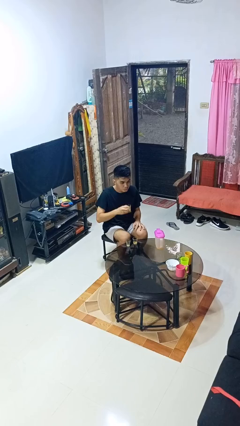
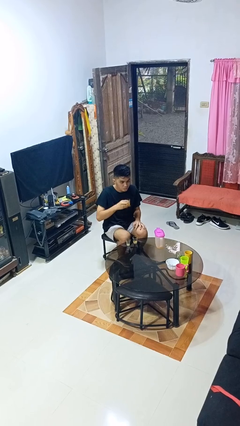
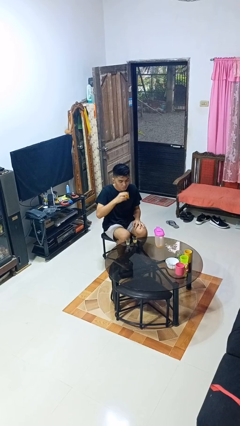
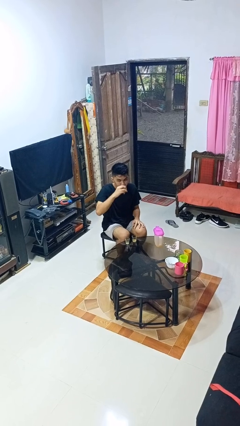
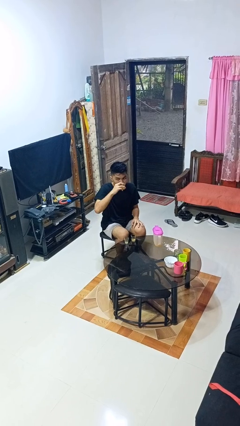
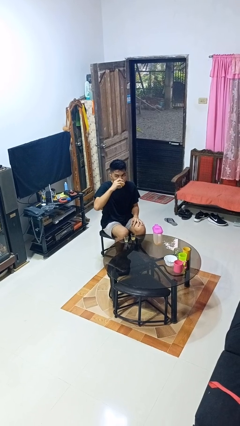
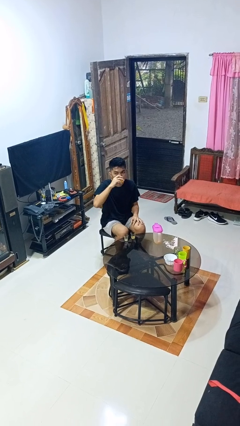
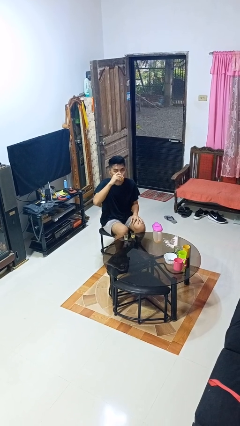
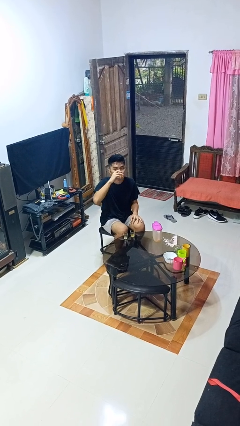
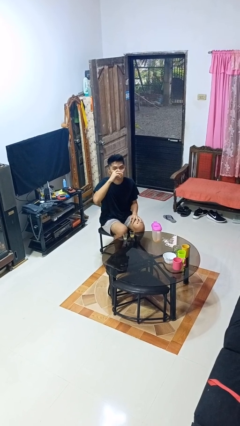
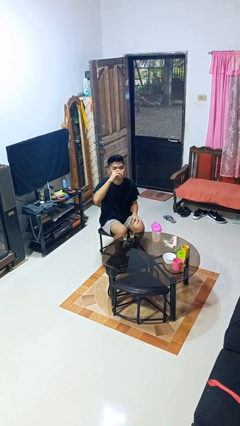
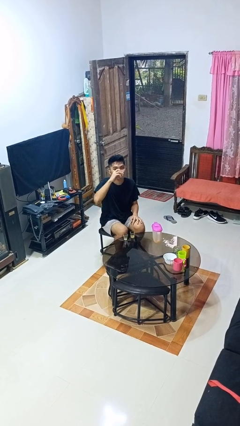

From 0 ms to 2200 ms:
person drinks from shotglass

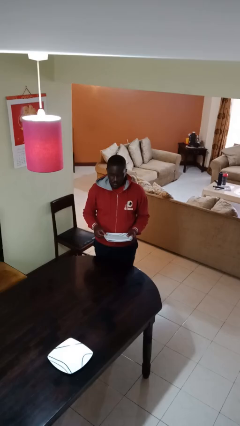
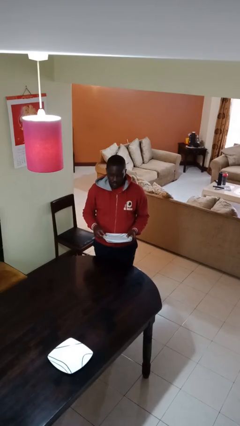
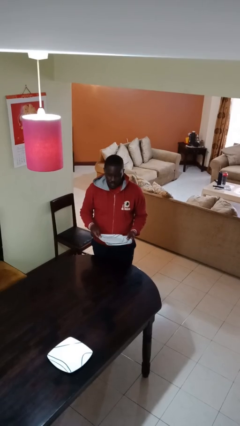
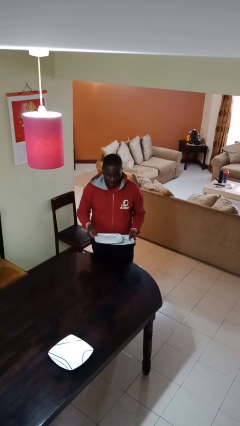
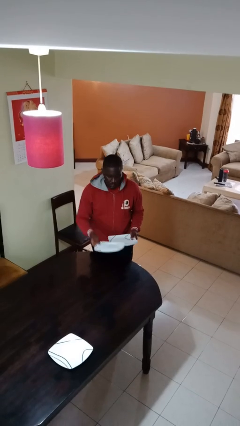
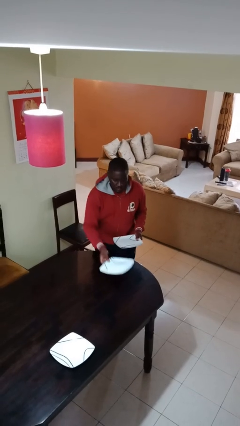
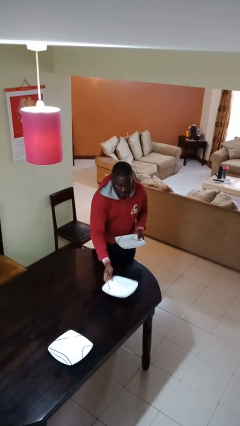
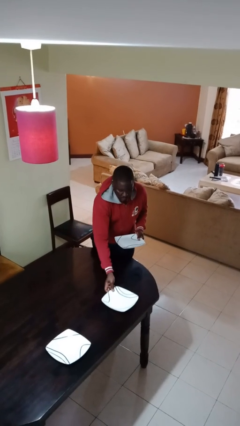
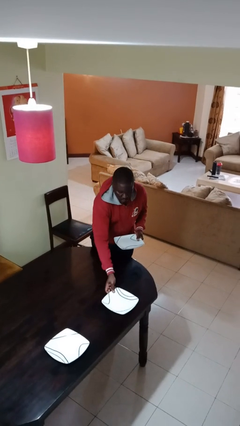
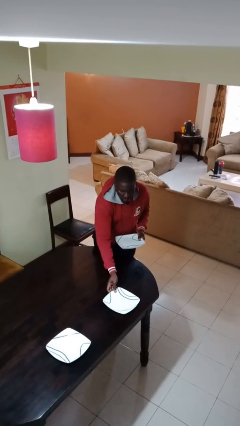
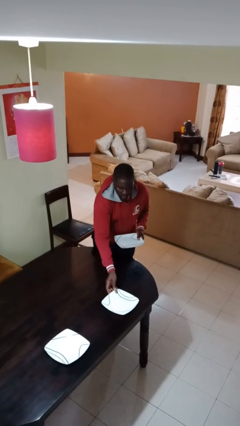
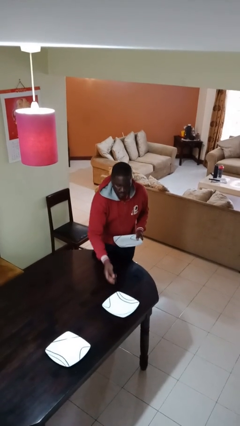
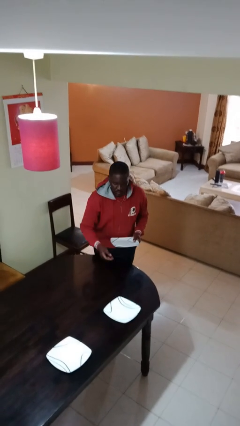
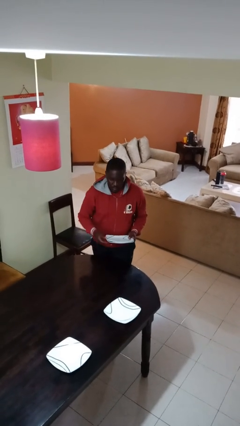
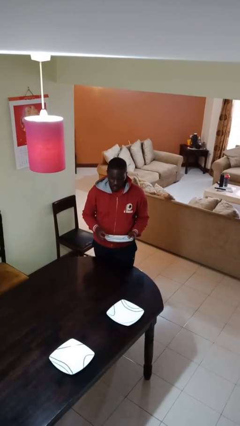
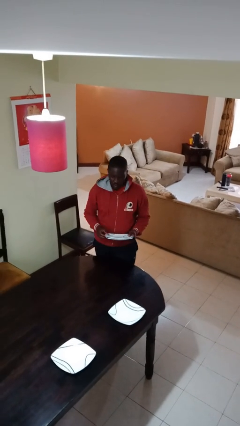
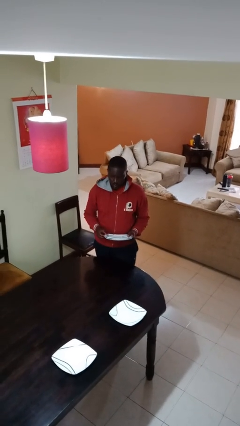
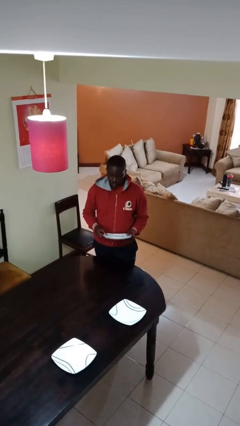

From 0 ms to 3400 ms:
person sets table

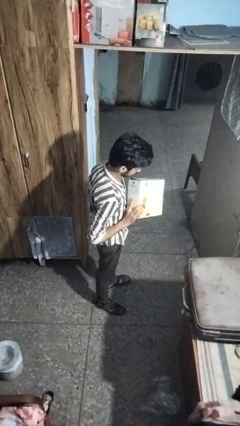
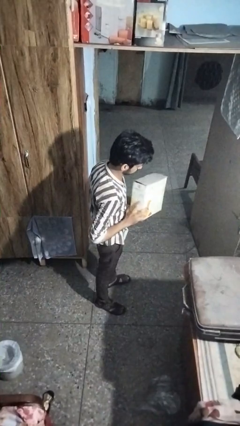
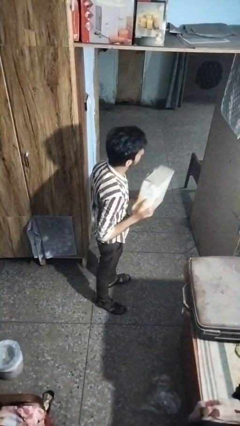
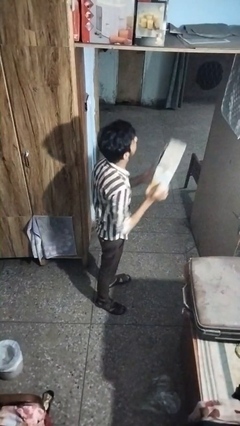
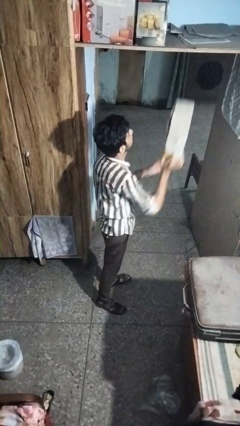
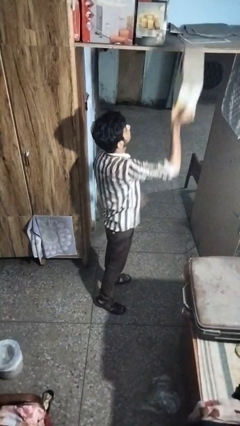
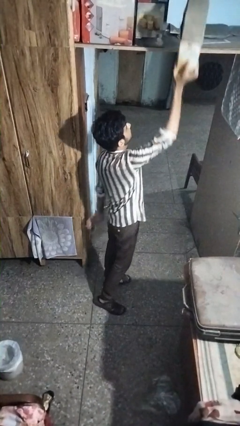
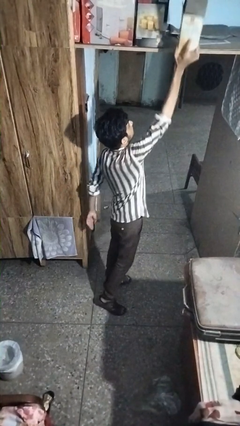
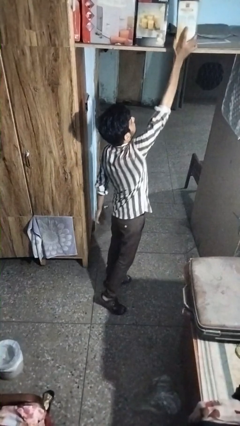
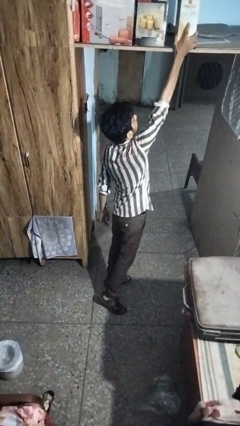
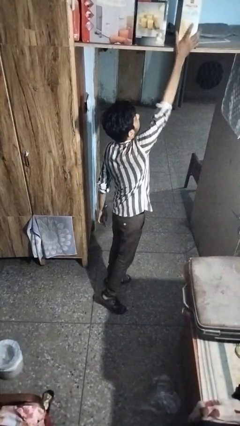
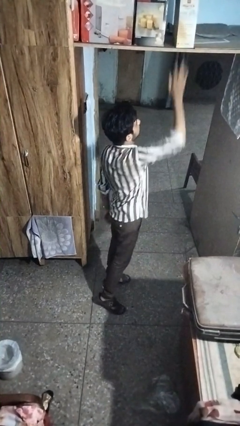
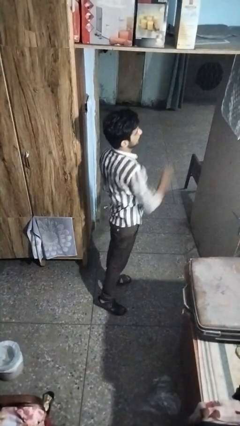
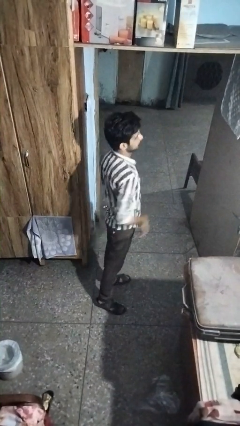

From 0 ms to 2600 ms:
person puts down object on shelf

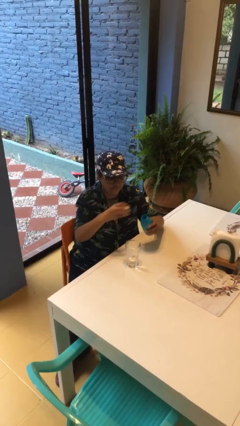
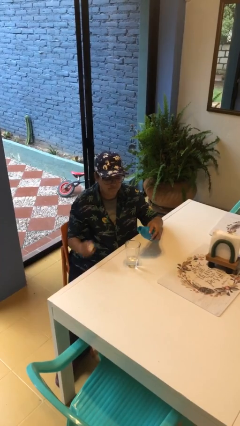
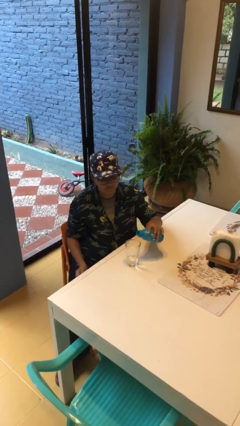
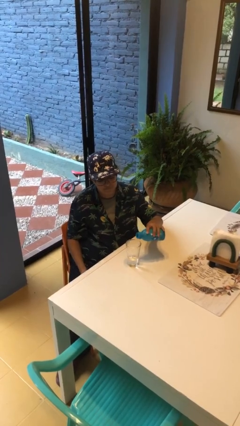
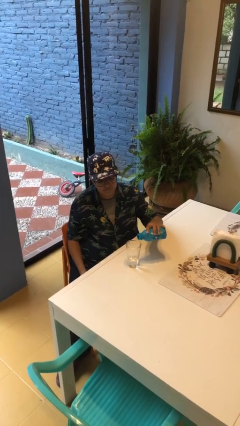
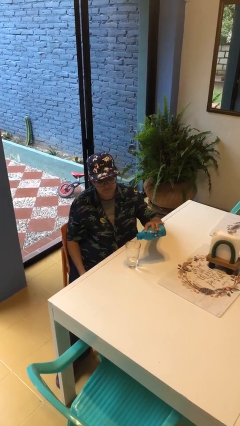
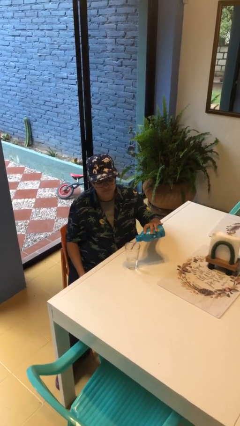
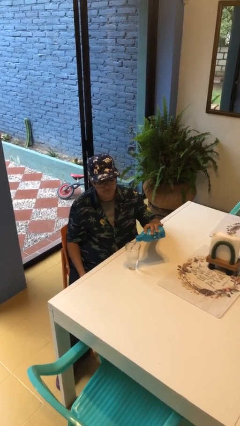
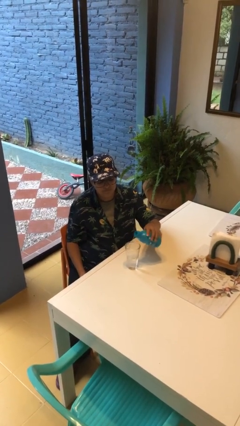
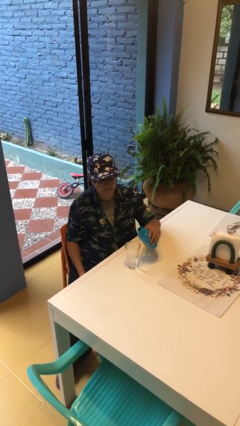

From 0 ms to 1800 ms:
person pours liquid into cup

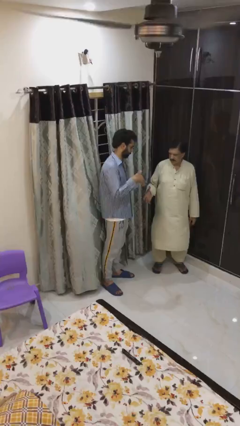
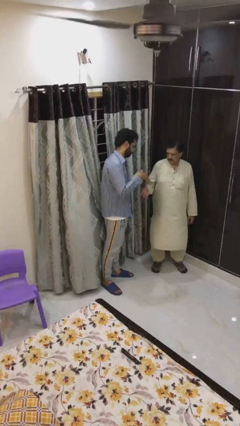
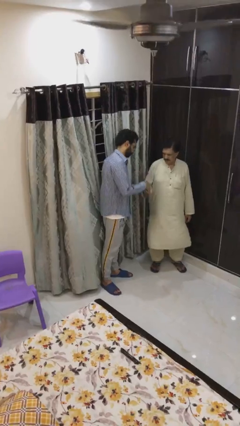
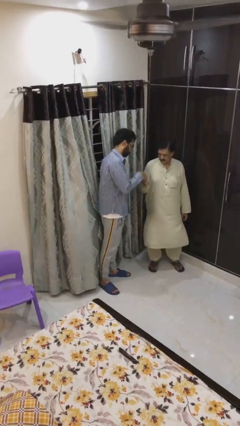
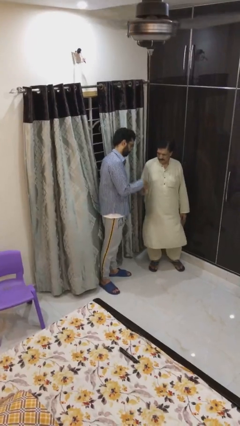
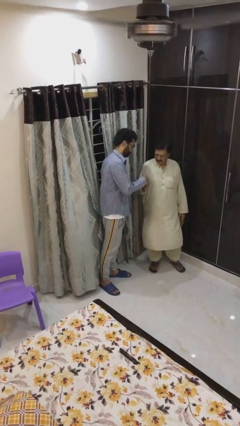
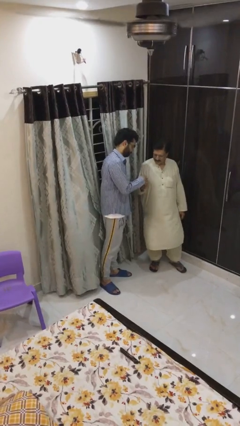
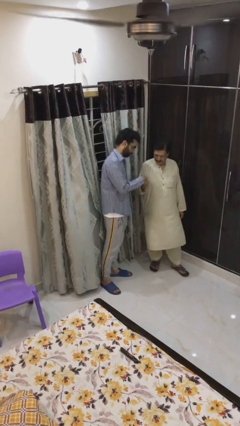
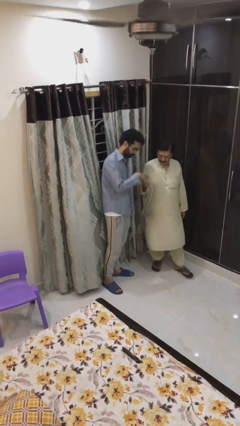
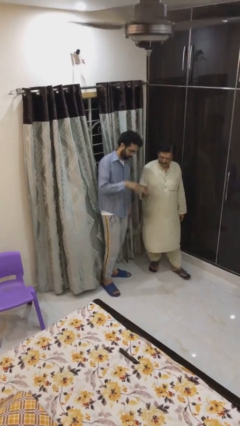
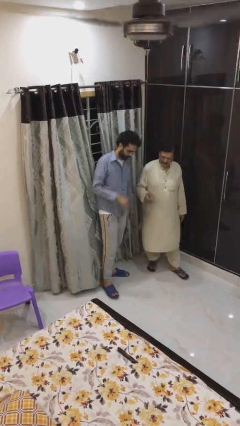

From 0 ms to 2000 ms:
person shakes hand

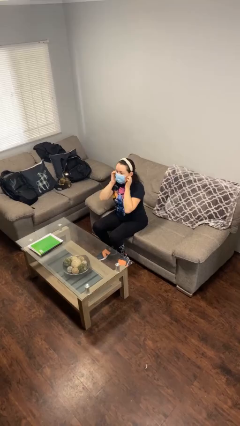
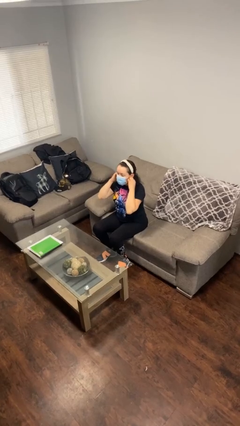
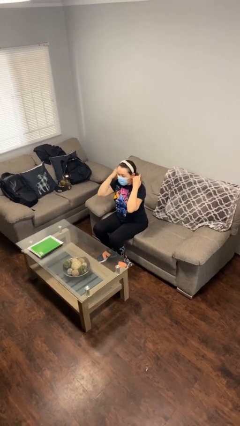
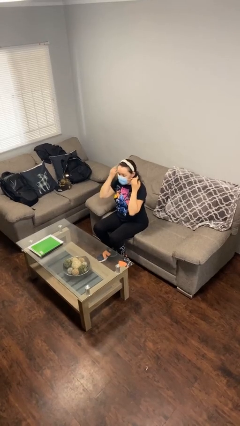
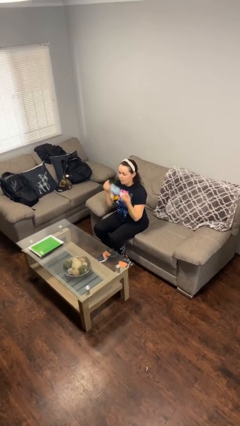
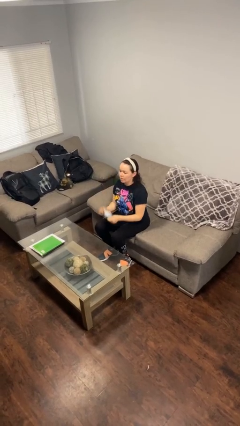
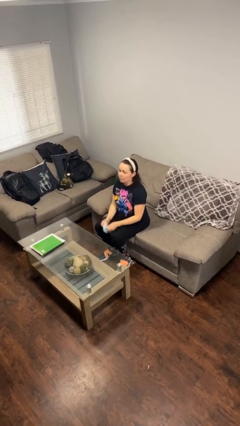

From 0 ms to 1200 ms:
person takes off facemask

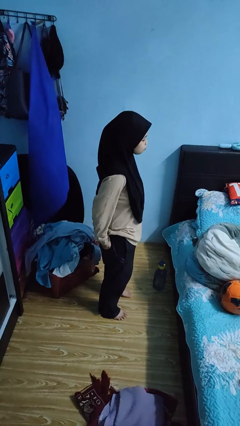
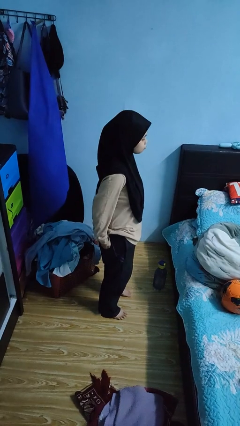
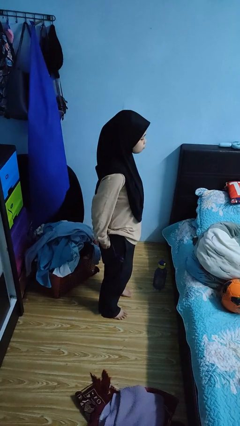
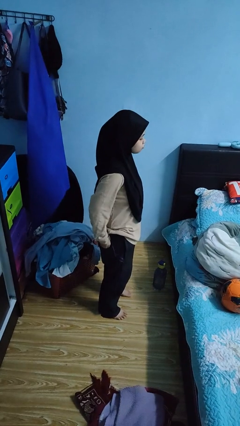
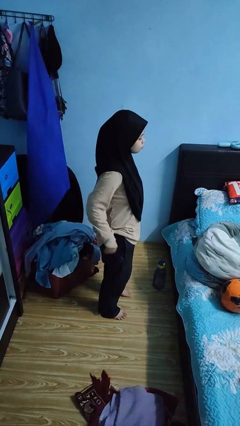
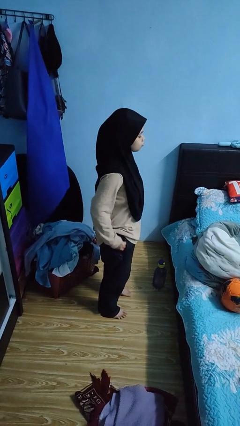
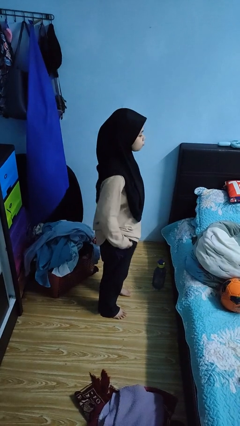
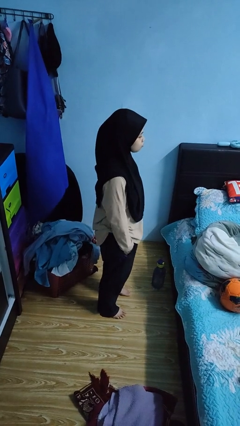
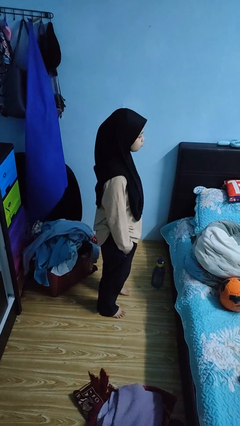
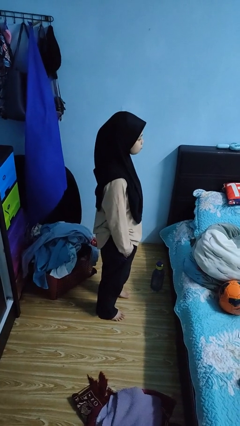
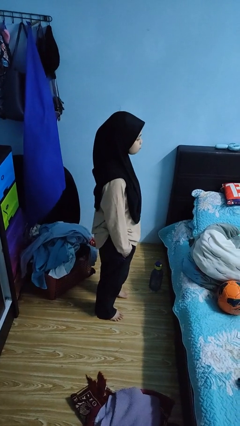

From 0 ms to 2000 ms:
person puts hands in back pockets

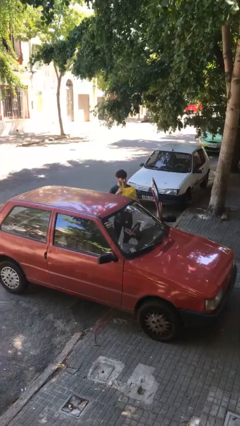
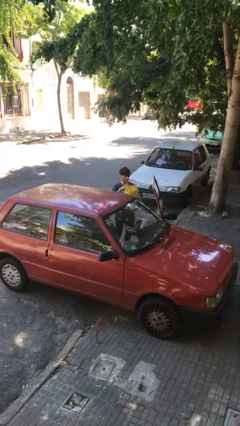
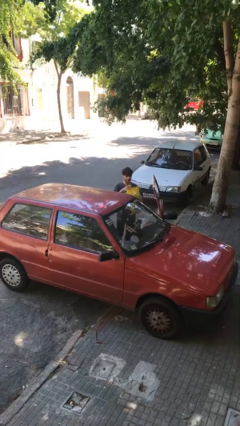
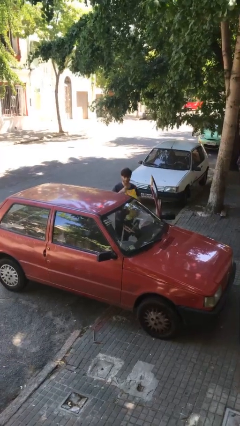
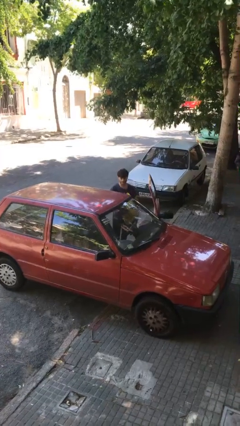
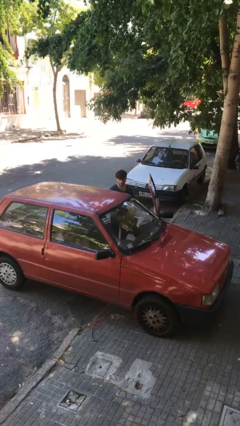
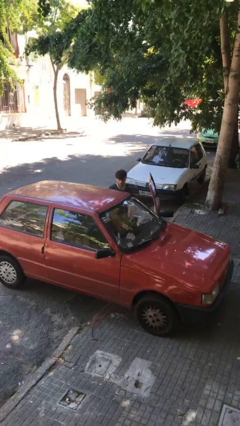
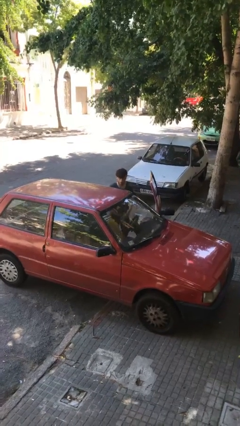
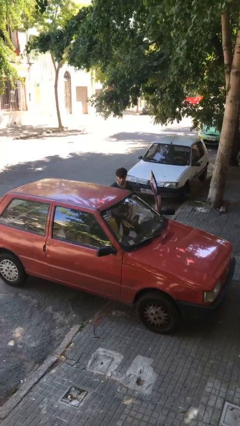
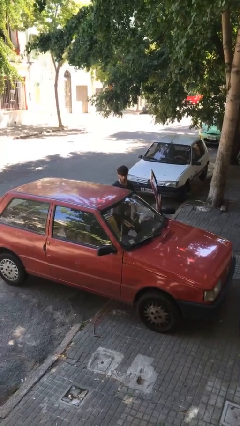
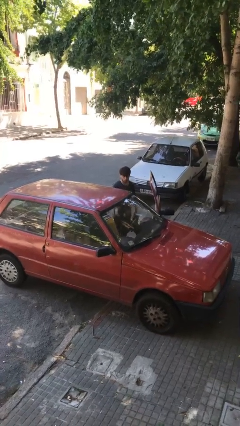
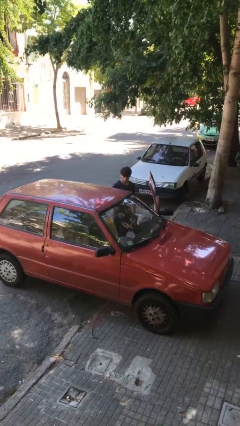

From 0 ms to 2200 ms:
person loads car
